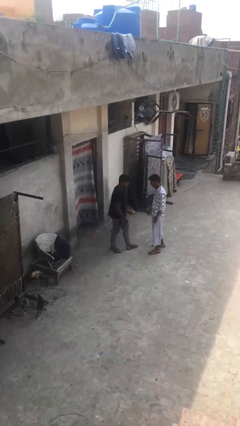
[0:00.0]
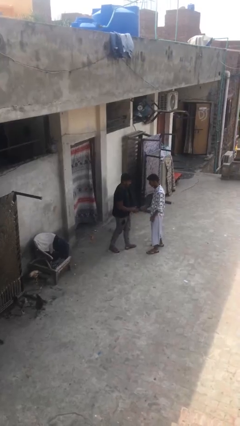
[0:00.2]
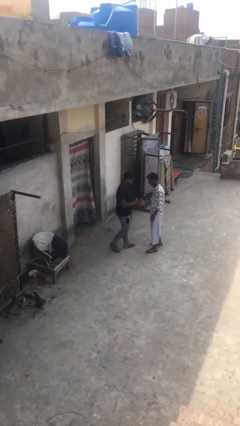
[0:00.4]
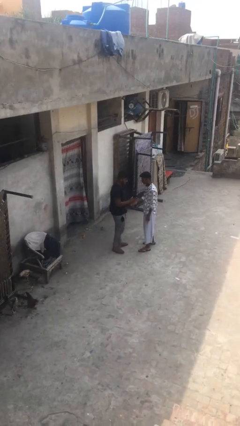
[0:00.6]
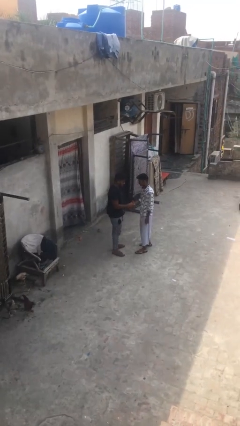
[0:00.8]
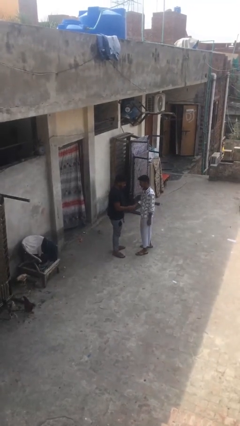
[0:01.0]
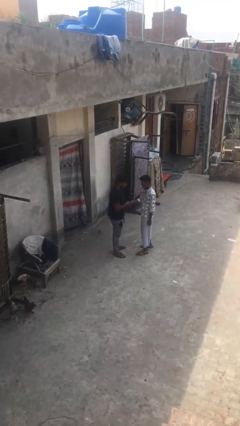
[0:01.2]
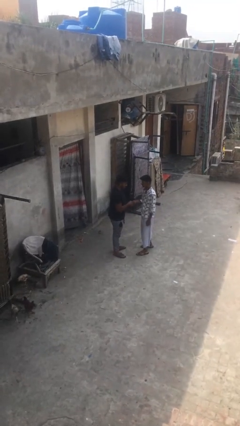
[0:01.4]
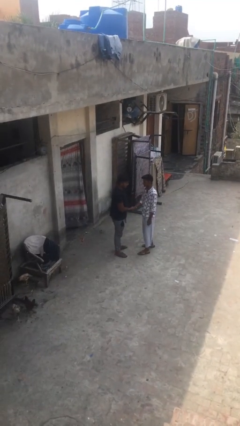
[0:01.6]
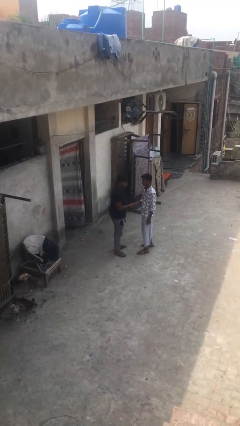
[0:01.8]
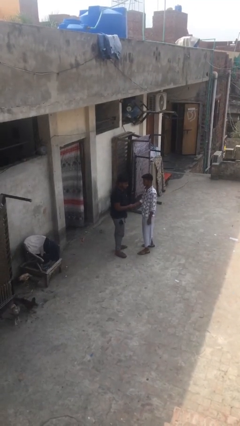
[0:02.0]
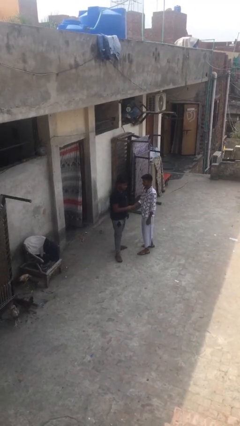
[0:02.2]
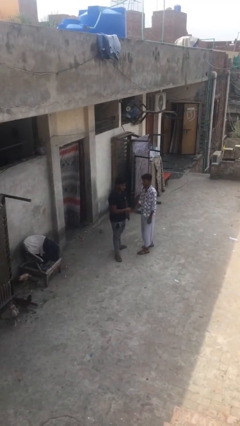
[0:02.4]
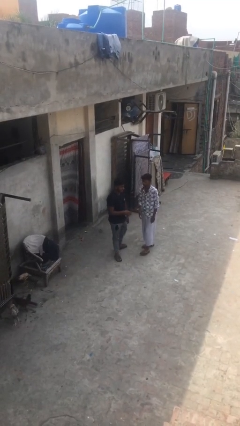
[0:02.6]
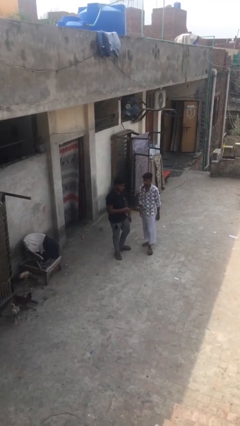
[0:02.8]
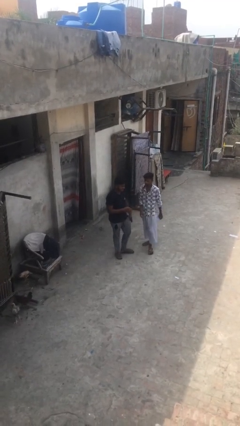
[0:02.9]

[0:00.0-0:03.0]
person shakes hand

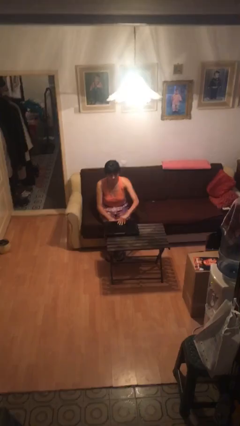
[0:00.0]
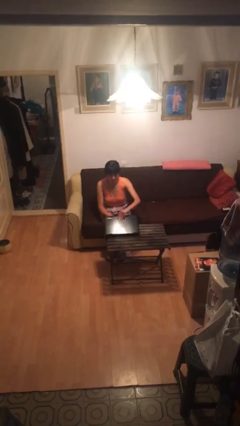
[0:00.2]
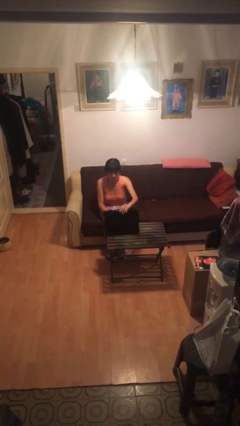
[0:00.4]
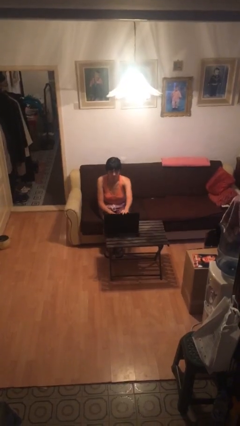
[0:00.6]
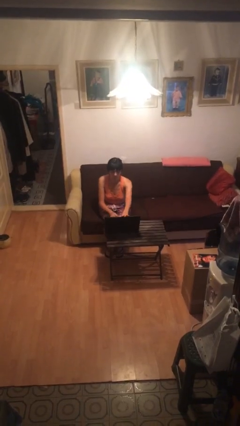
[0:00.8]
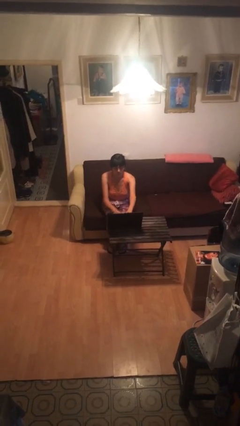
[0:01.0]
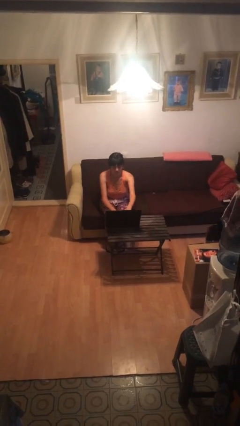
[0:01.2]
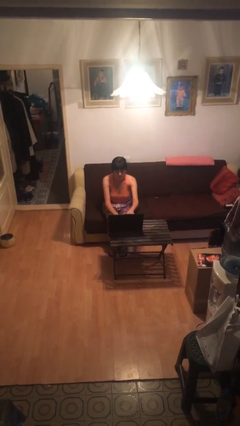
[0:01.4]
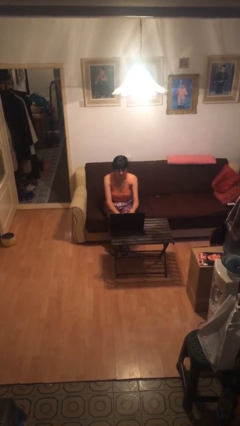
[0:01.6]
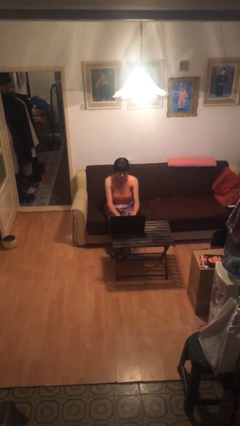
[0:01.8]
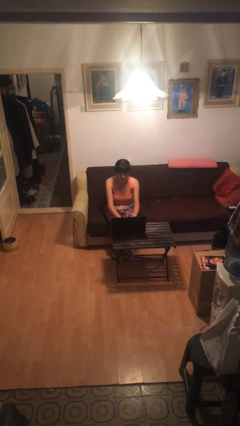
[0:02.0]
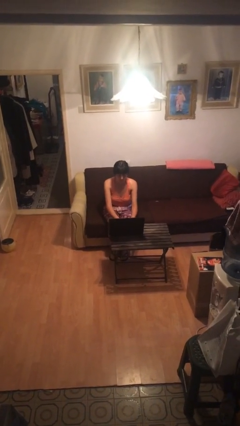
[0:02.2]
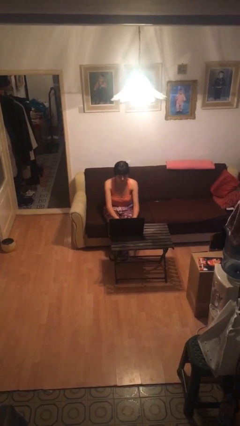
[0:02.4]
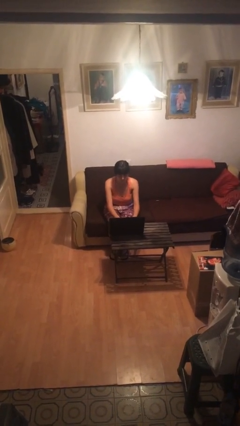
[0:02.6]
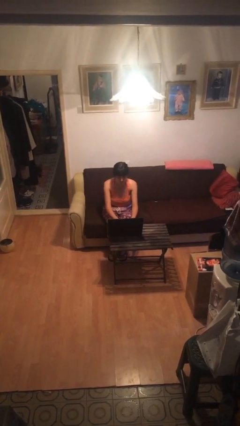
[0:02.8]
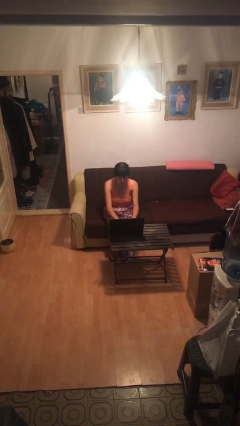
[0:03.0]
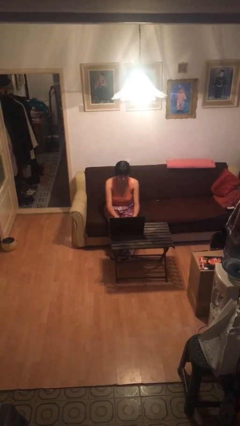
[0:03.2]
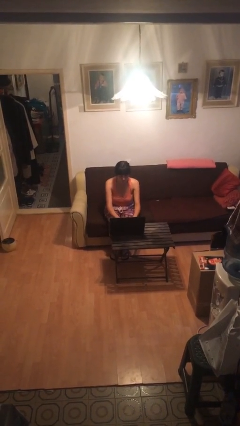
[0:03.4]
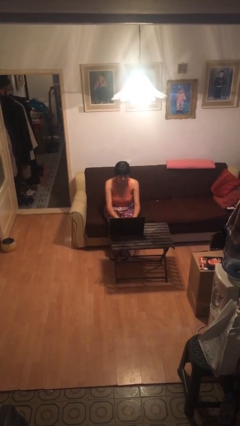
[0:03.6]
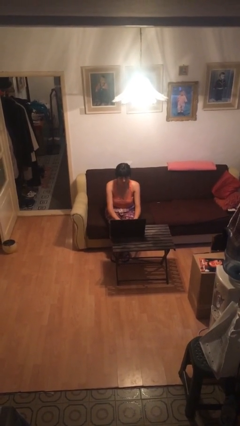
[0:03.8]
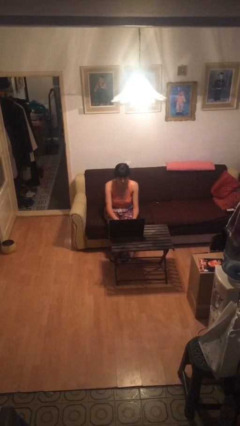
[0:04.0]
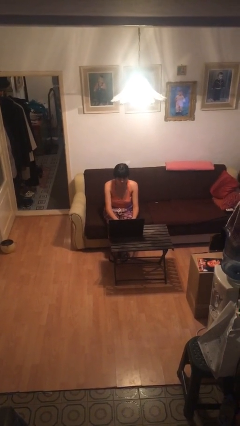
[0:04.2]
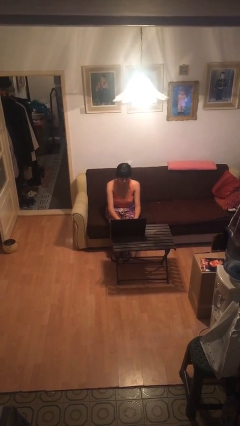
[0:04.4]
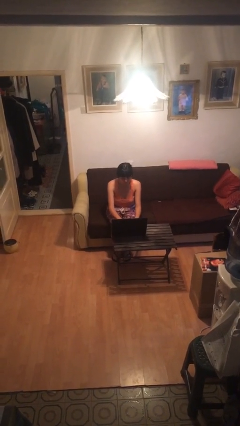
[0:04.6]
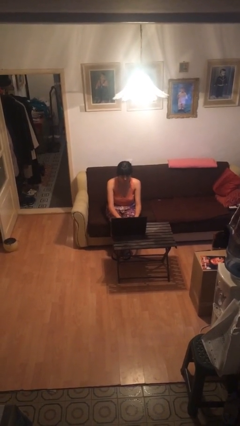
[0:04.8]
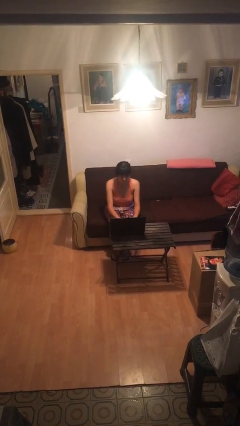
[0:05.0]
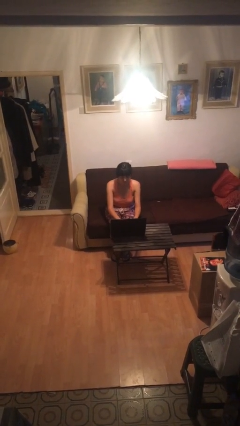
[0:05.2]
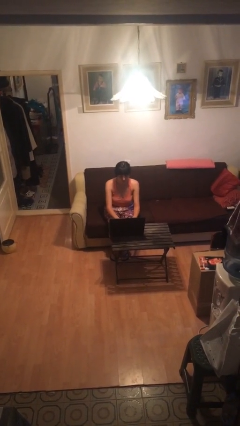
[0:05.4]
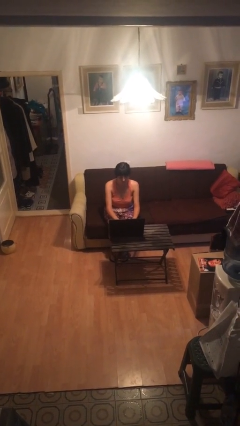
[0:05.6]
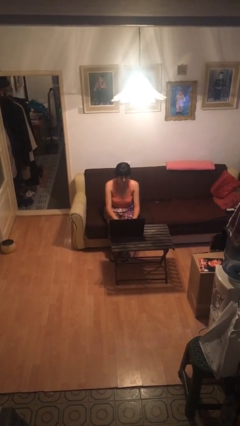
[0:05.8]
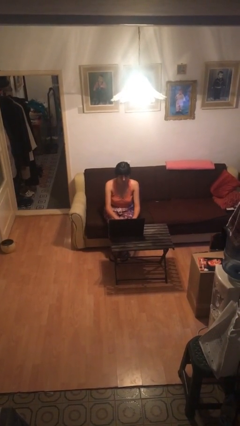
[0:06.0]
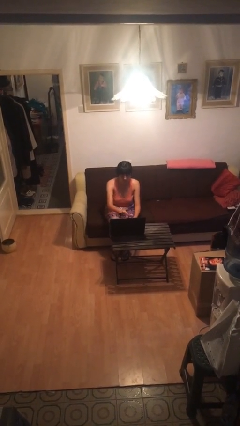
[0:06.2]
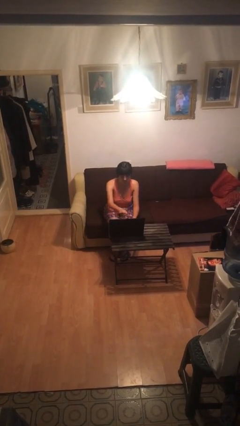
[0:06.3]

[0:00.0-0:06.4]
person interacts with laptop

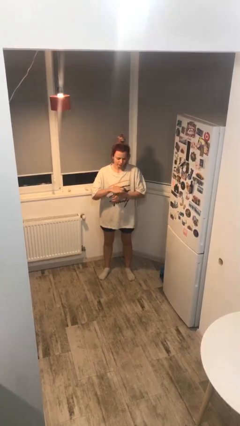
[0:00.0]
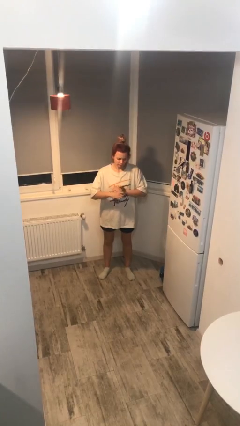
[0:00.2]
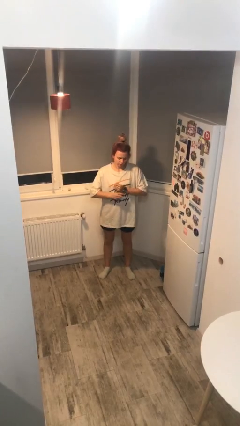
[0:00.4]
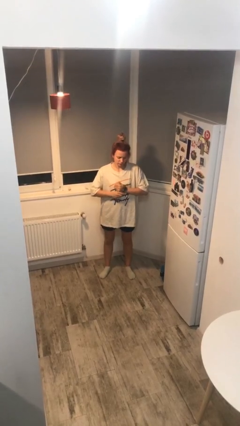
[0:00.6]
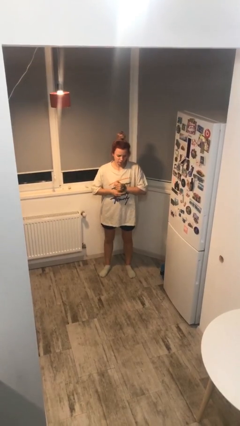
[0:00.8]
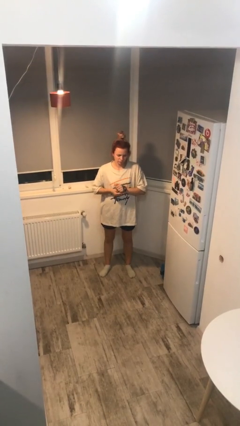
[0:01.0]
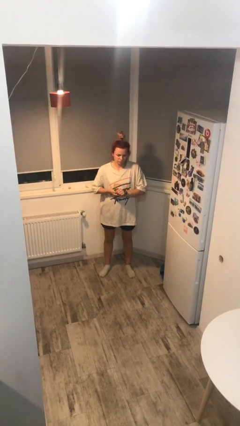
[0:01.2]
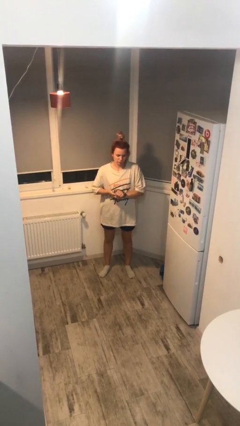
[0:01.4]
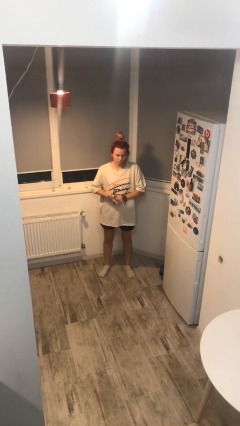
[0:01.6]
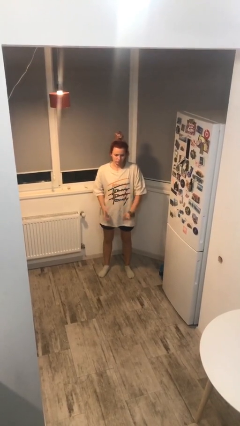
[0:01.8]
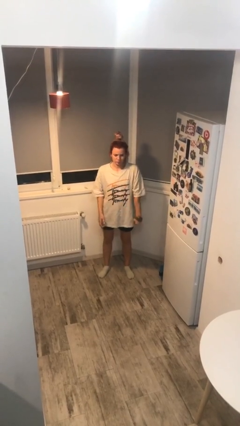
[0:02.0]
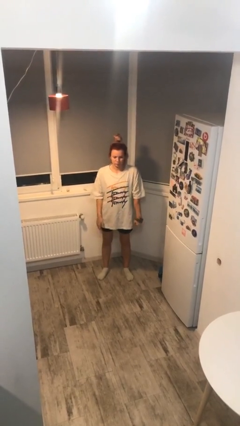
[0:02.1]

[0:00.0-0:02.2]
person puts on wristwatch

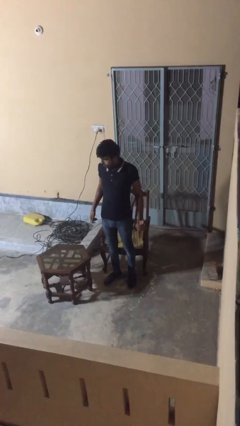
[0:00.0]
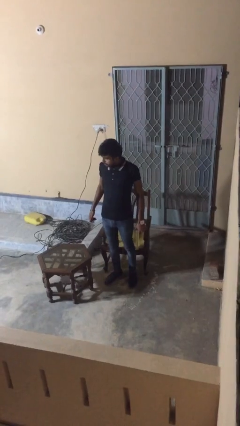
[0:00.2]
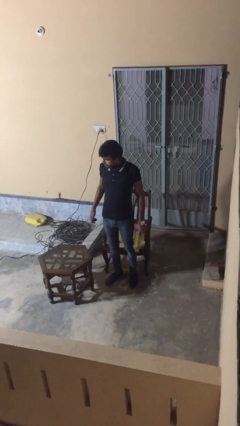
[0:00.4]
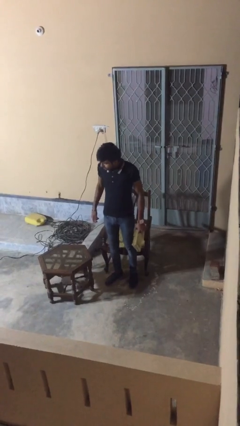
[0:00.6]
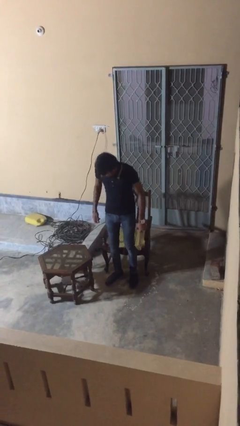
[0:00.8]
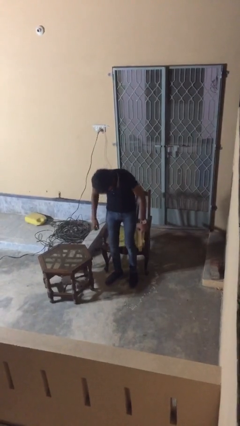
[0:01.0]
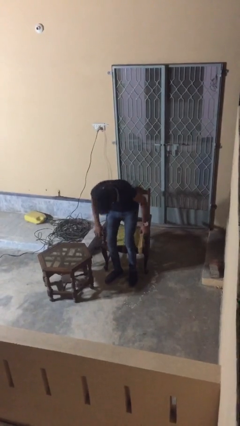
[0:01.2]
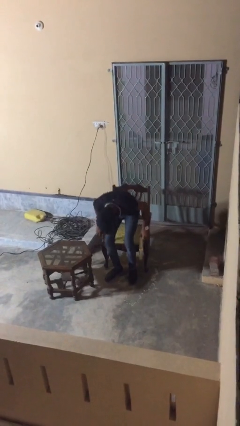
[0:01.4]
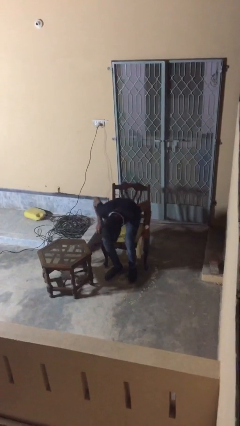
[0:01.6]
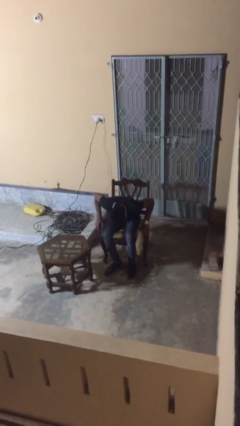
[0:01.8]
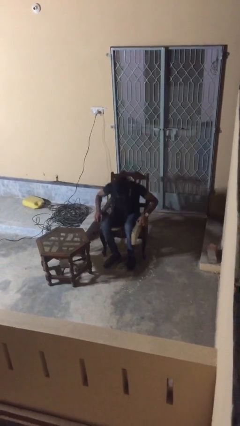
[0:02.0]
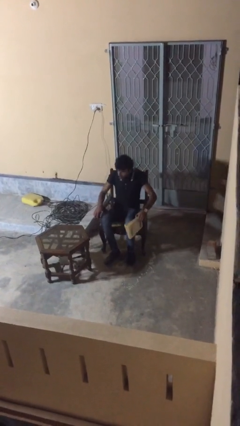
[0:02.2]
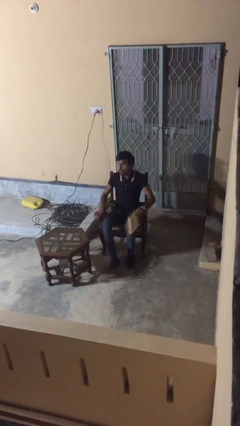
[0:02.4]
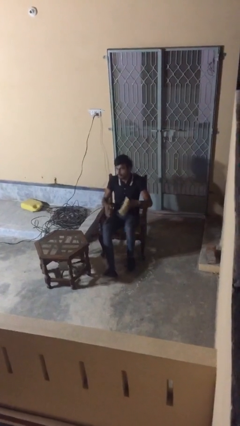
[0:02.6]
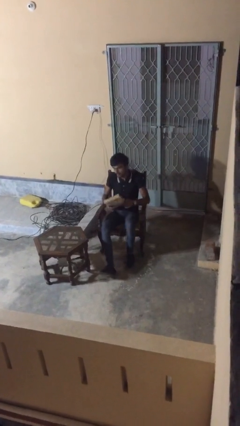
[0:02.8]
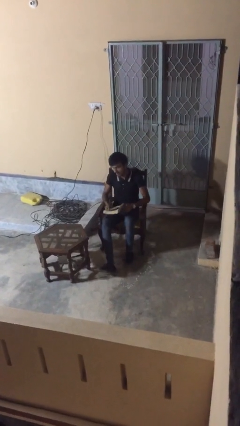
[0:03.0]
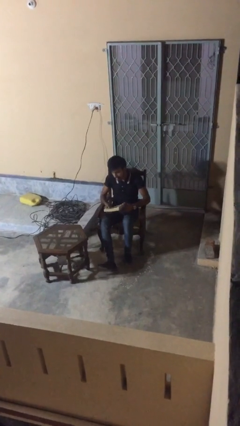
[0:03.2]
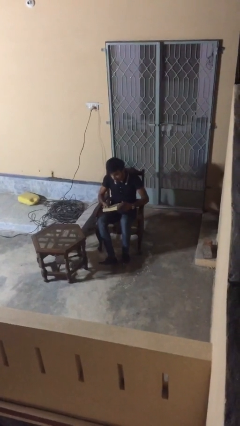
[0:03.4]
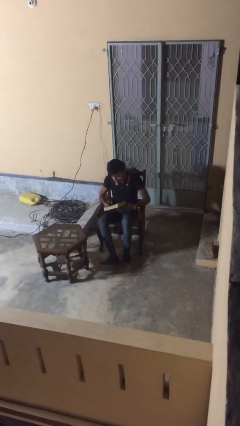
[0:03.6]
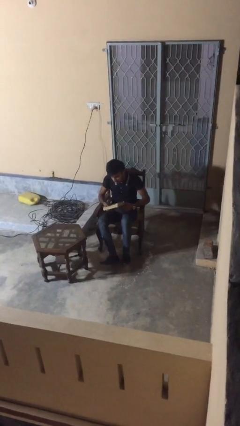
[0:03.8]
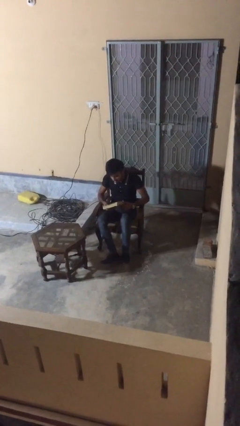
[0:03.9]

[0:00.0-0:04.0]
person sits down

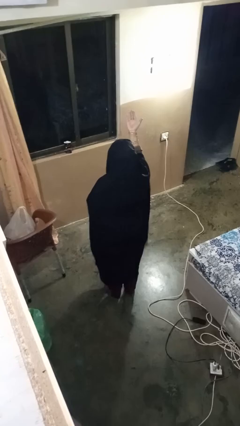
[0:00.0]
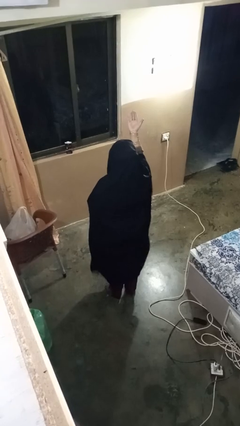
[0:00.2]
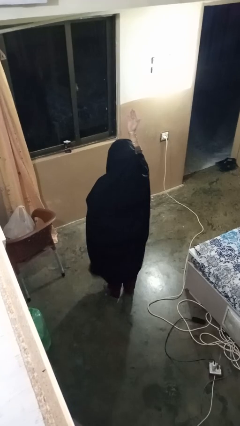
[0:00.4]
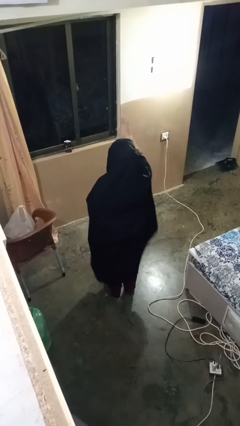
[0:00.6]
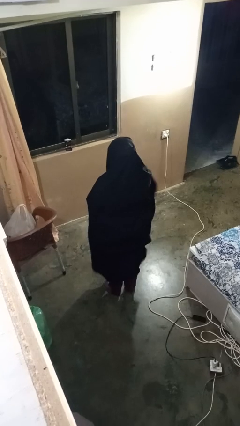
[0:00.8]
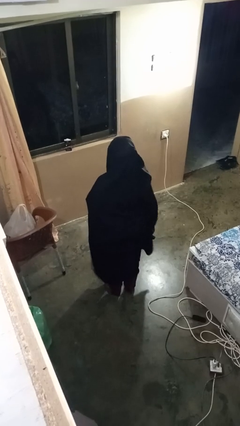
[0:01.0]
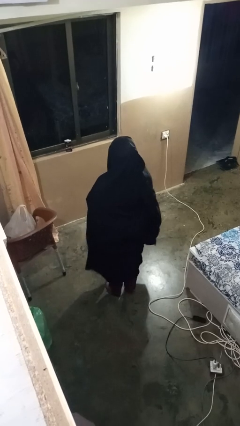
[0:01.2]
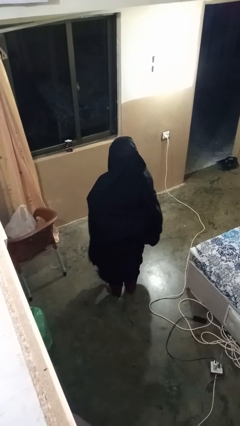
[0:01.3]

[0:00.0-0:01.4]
person gestures swipe down

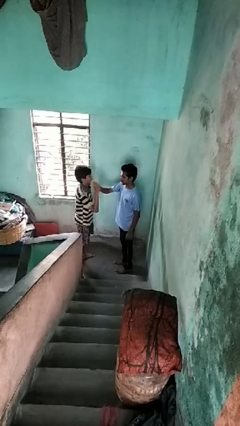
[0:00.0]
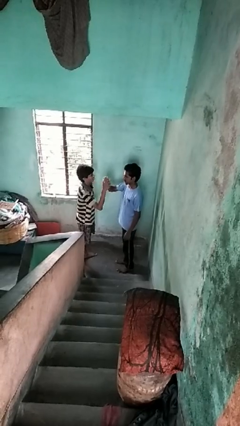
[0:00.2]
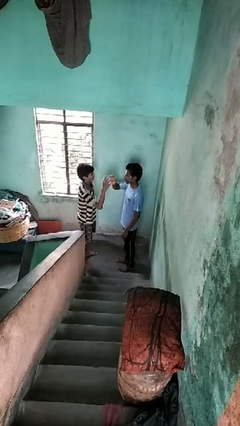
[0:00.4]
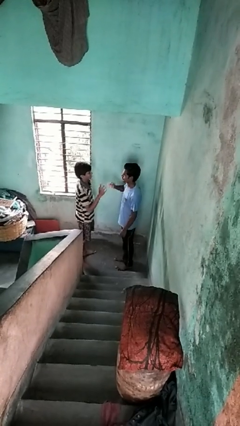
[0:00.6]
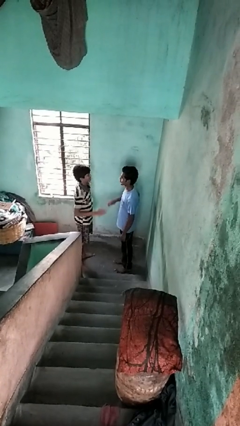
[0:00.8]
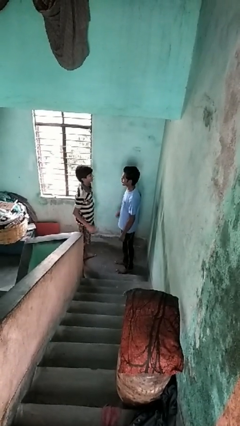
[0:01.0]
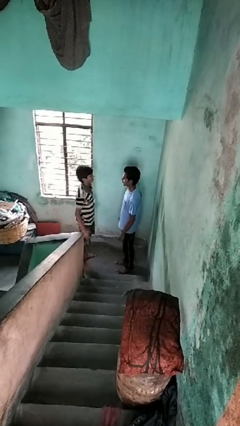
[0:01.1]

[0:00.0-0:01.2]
person highfives hand
